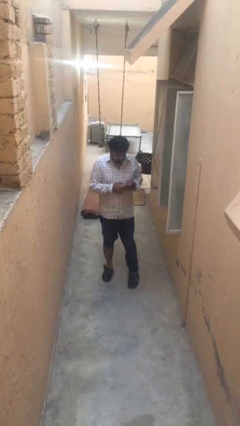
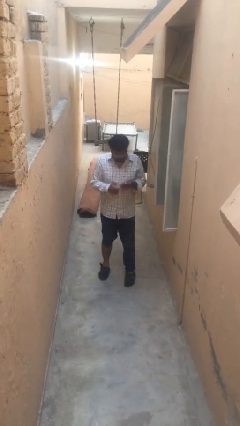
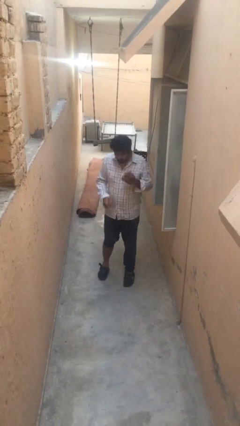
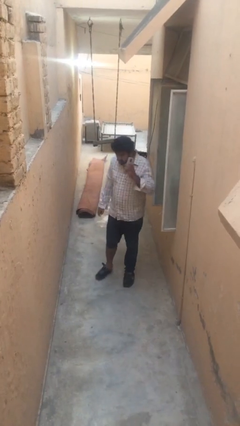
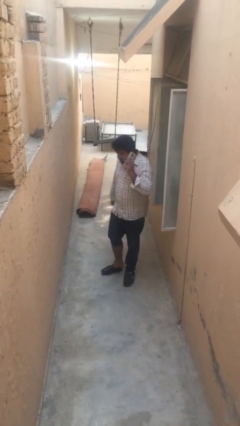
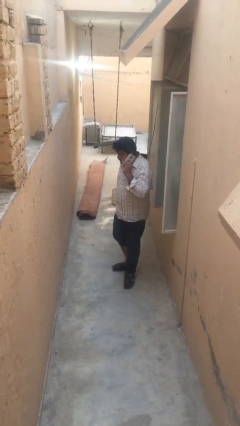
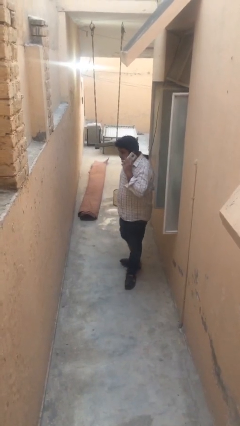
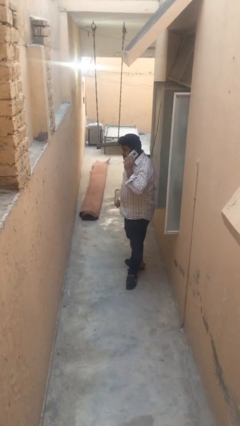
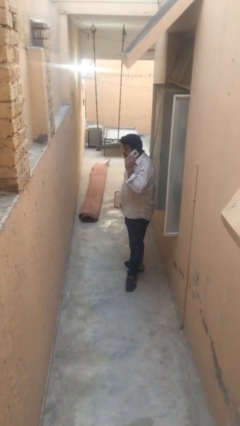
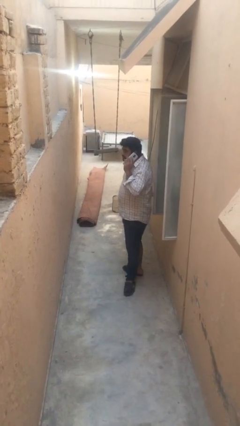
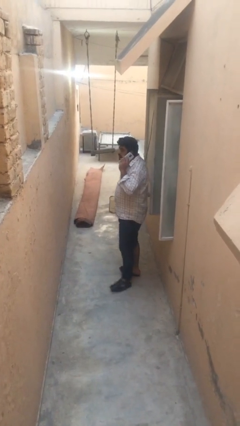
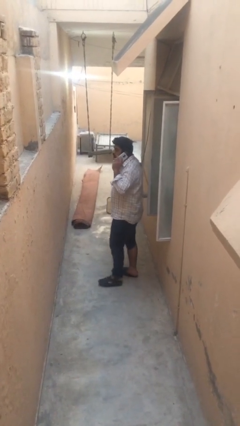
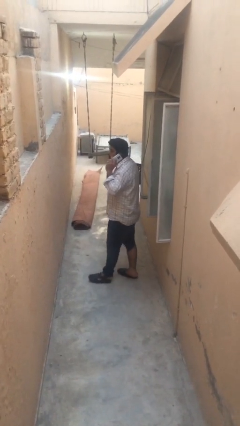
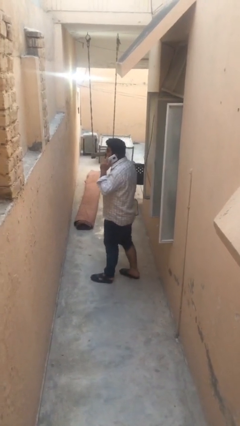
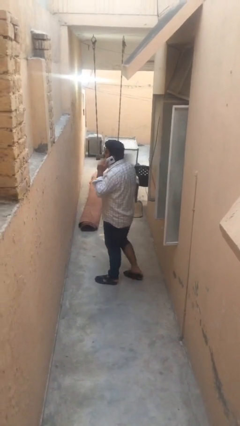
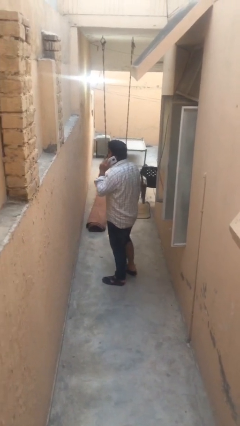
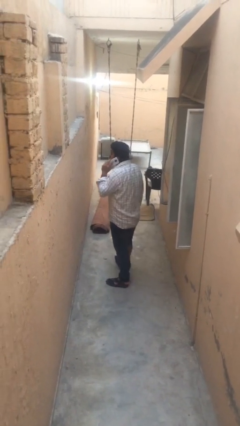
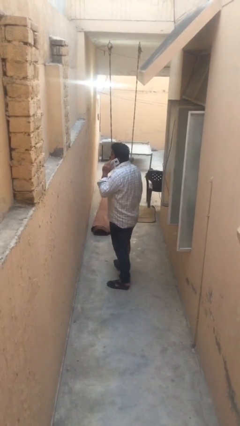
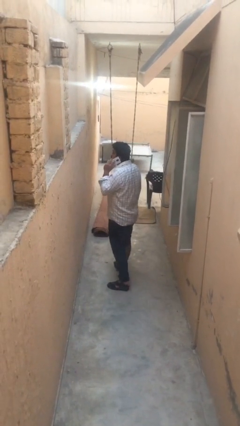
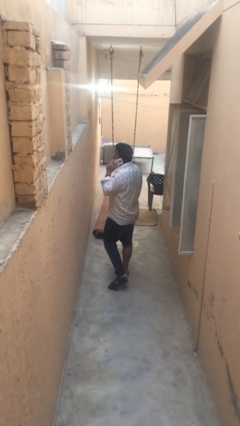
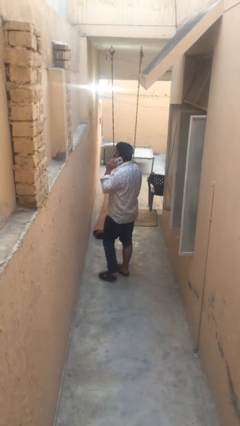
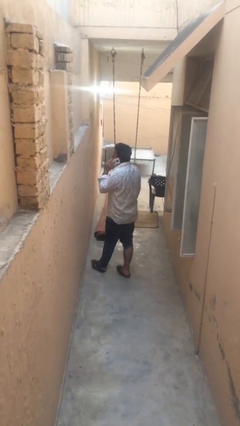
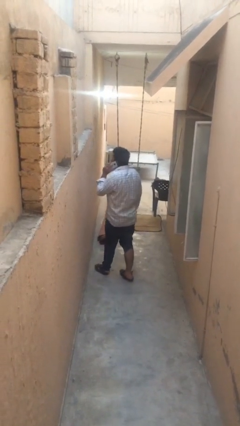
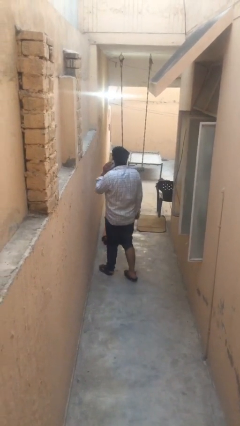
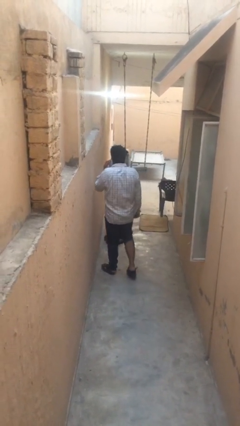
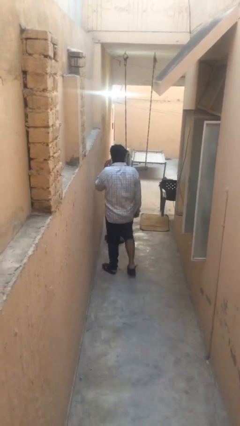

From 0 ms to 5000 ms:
person talks on phone

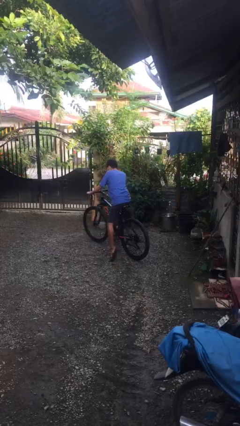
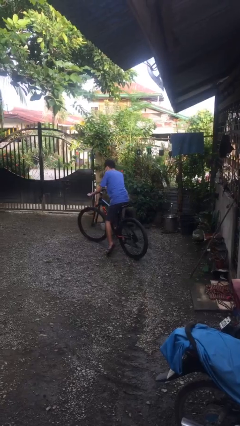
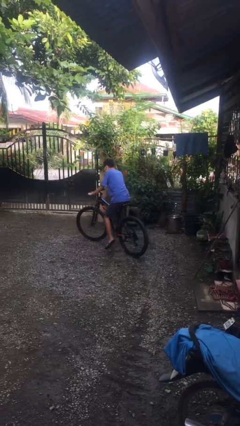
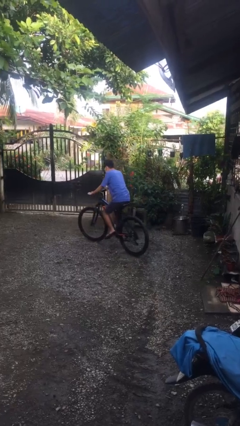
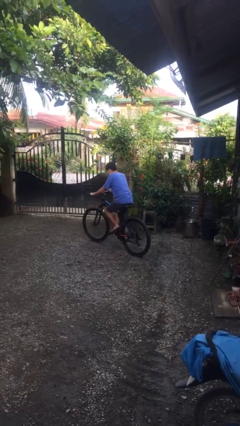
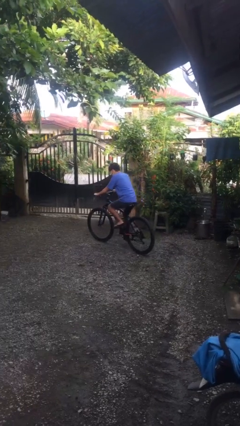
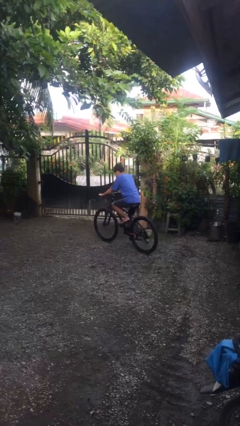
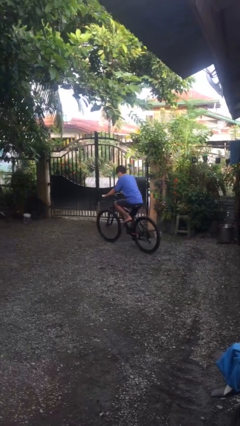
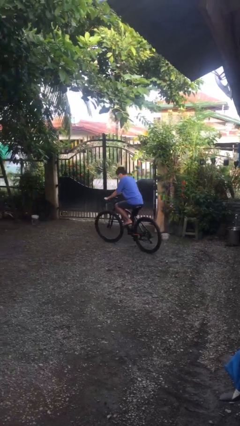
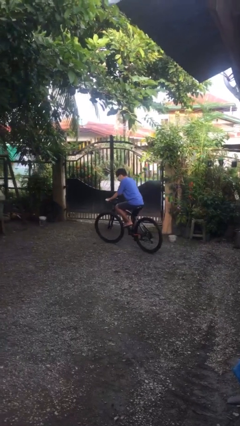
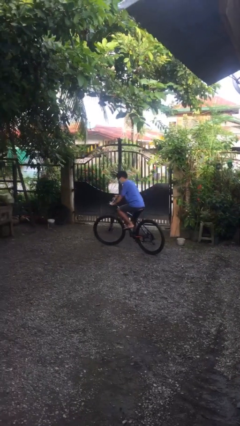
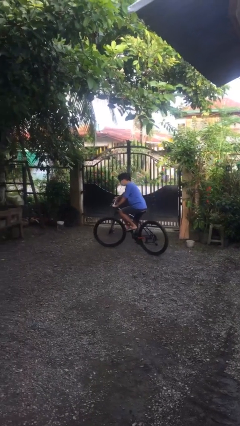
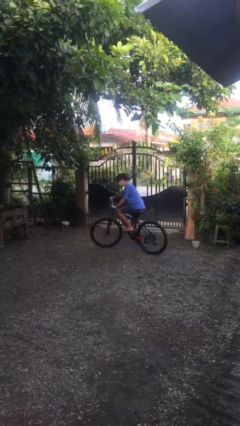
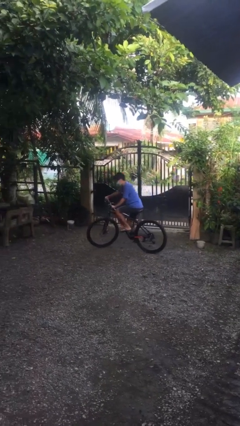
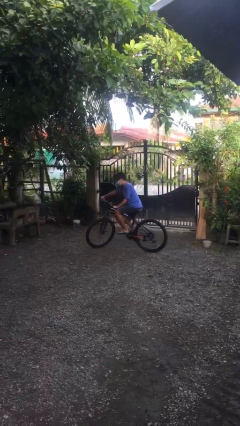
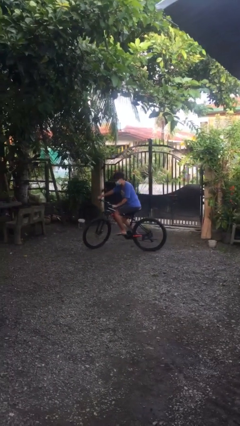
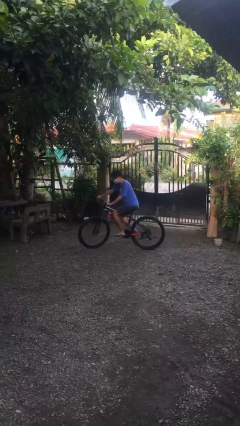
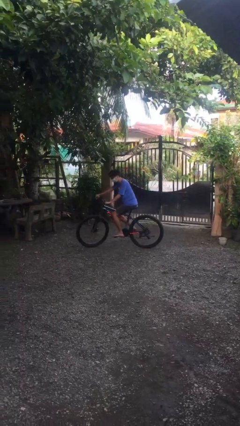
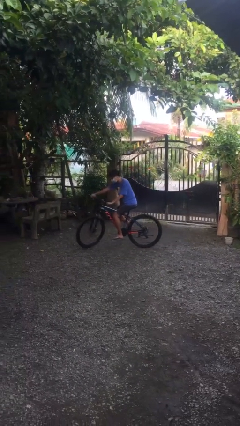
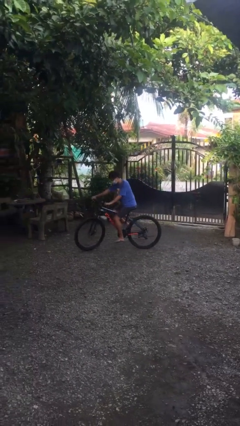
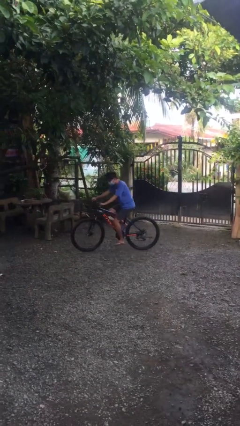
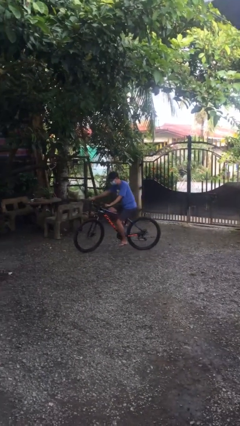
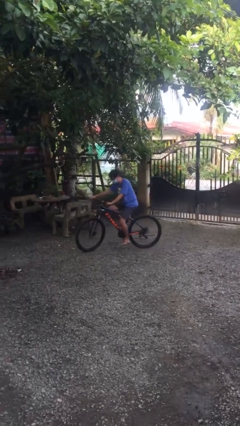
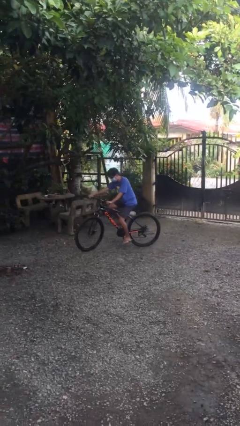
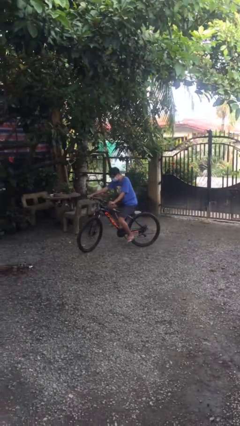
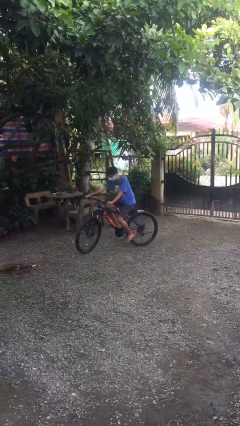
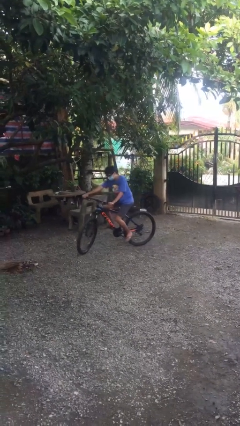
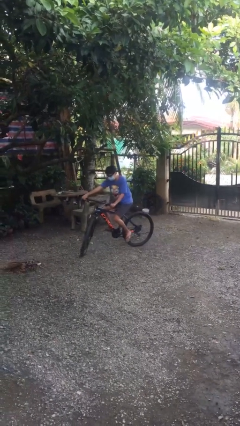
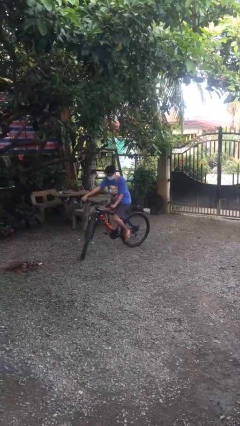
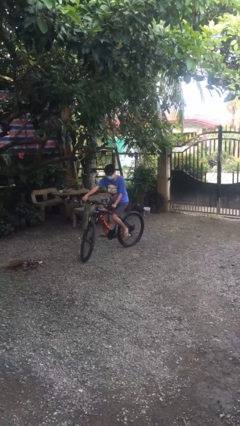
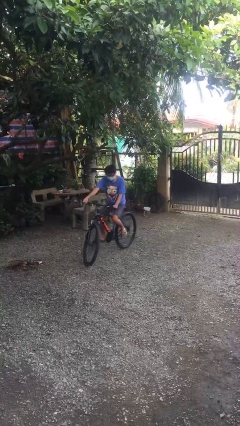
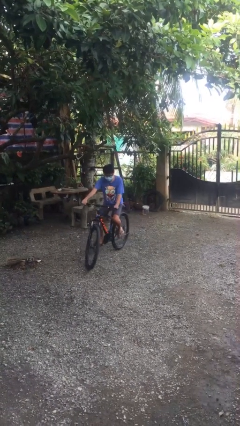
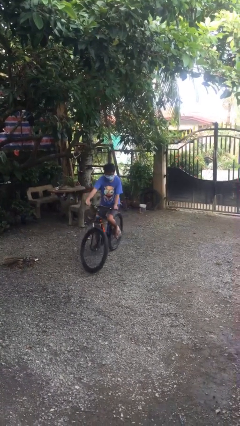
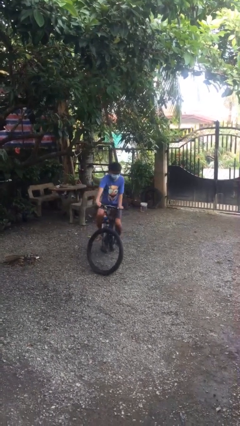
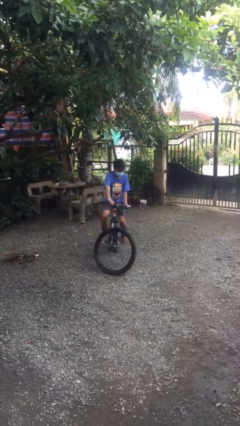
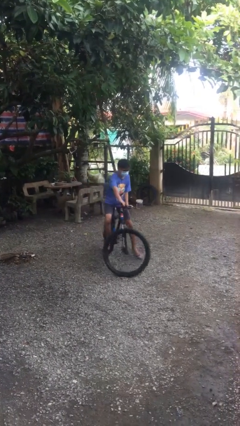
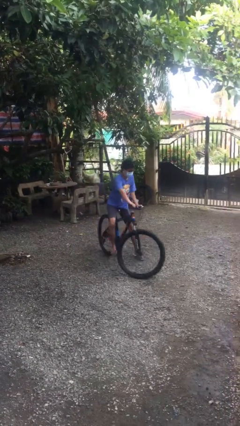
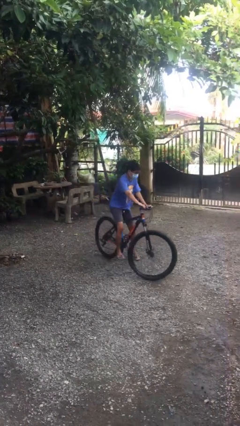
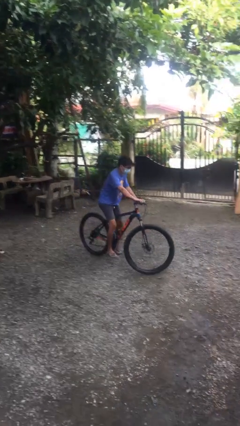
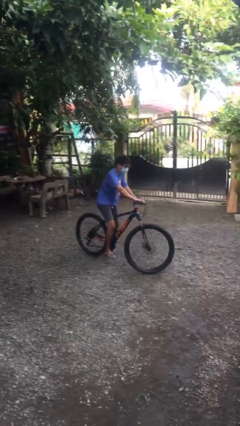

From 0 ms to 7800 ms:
person rides bicycle

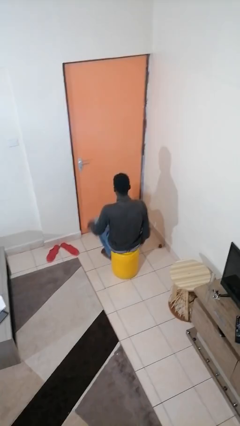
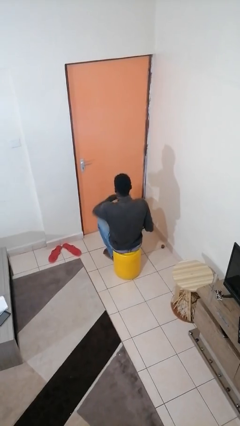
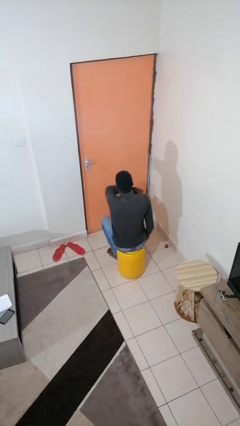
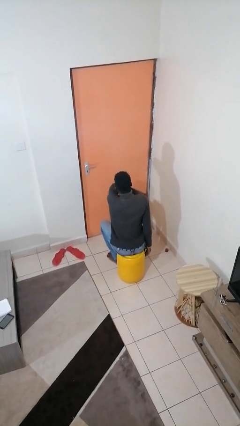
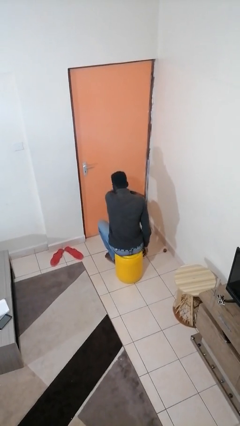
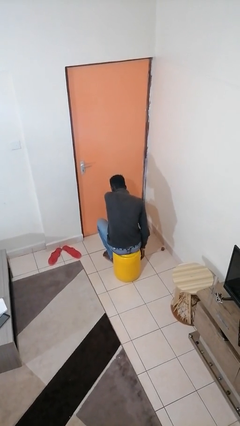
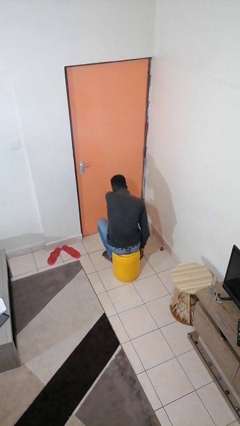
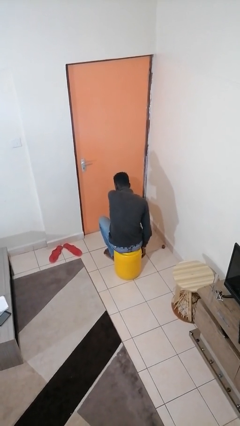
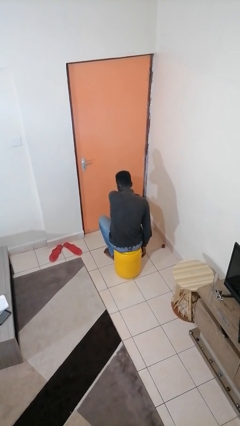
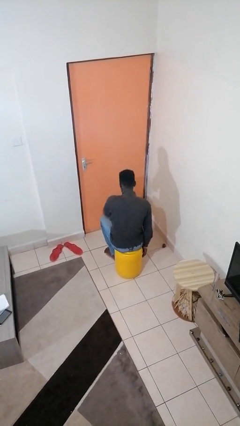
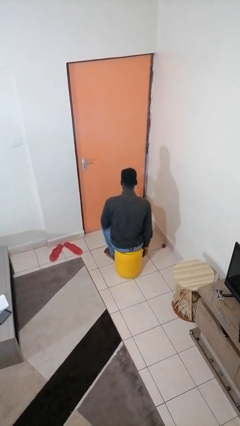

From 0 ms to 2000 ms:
person sneezes into arm

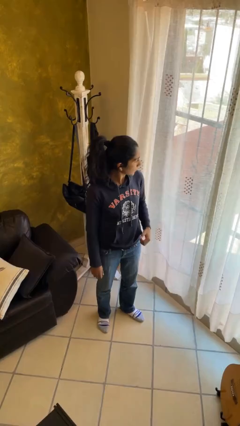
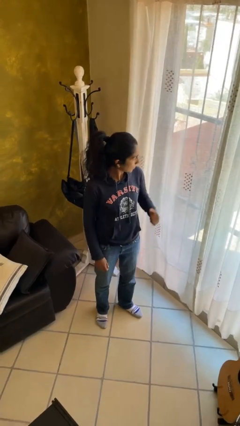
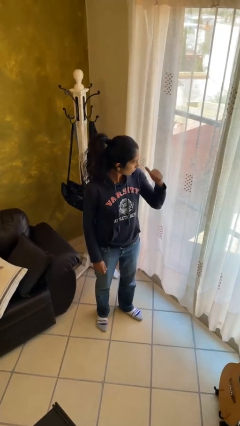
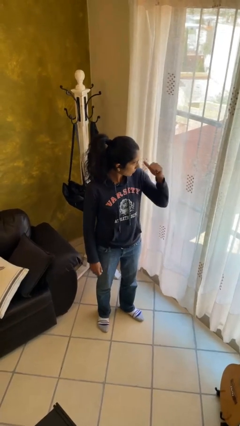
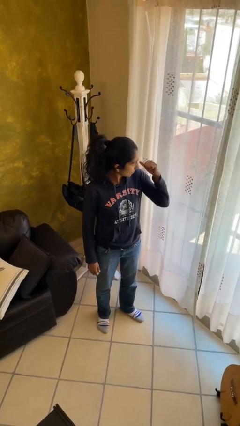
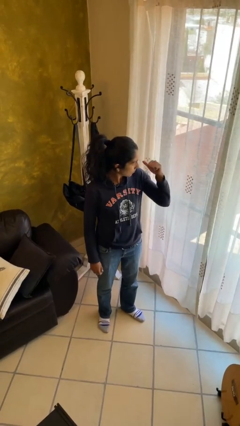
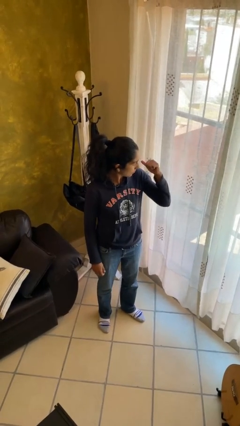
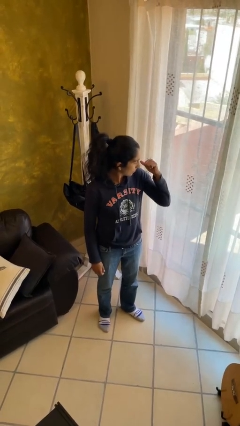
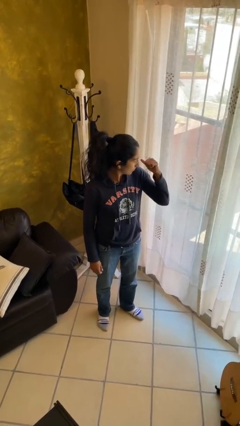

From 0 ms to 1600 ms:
person gestures behind me

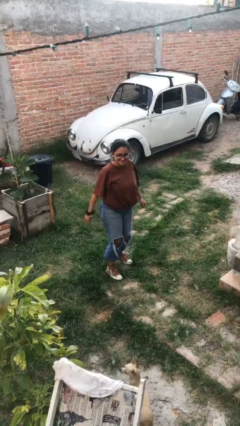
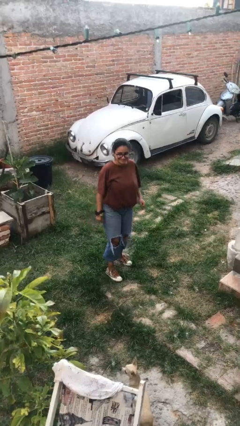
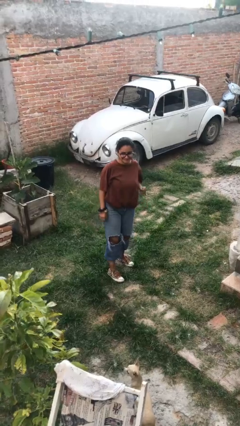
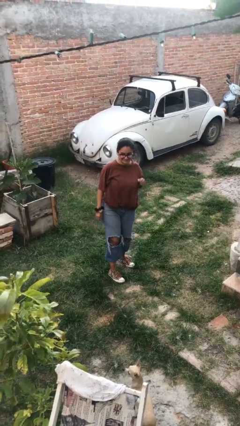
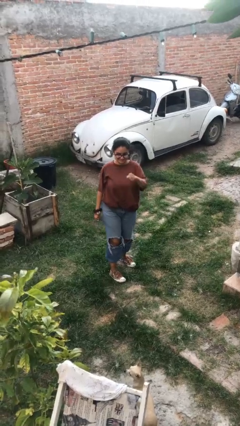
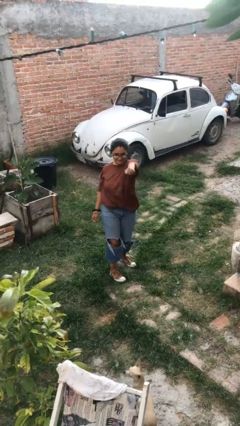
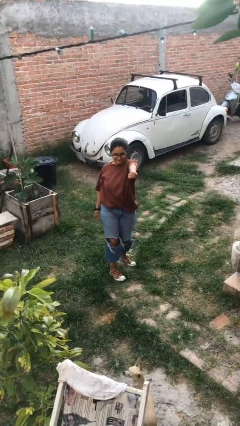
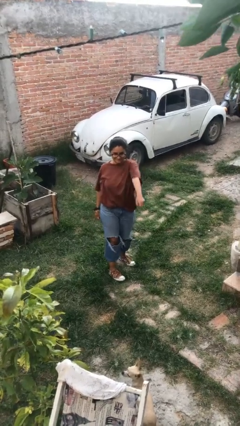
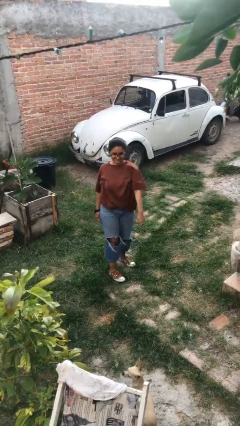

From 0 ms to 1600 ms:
person karate chop
